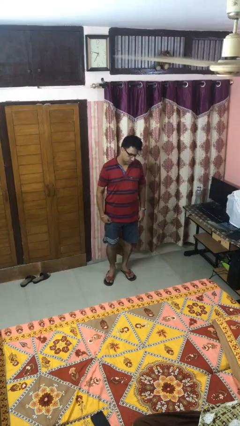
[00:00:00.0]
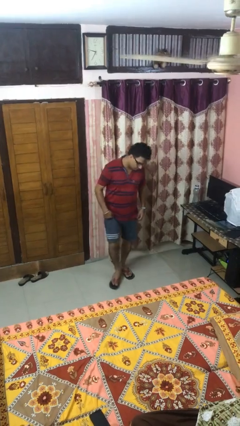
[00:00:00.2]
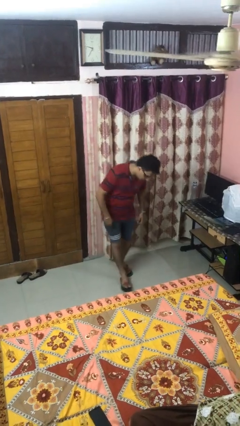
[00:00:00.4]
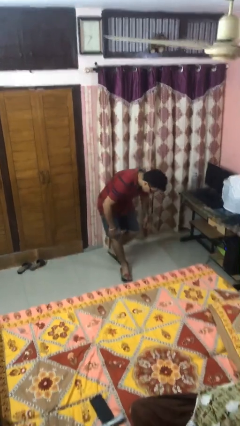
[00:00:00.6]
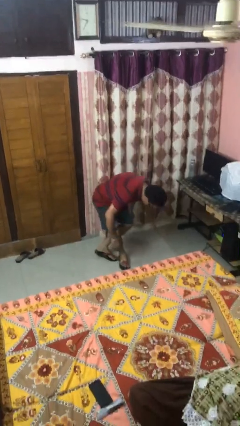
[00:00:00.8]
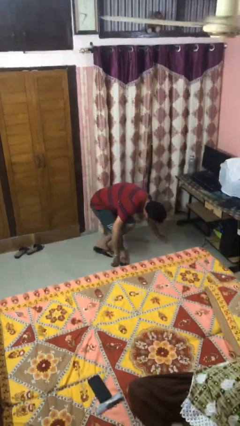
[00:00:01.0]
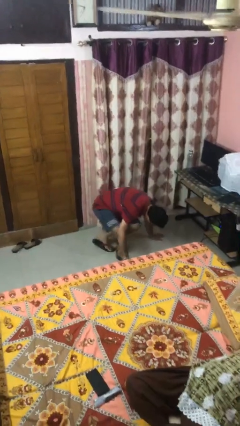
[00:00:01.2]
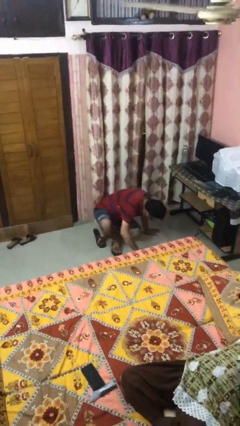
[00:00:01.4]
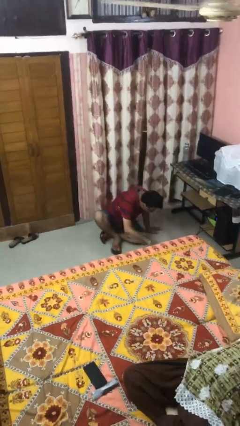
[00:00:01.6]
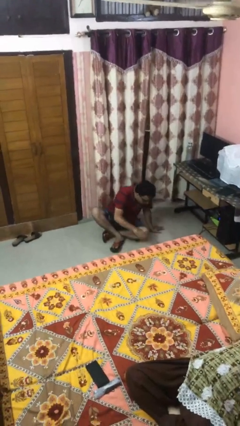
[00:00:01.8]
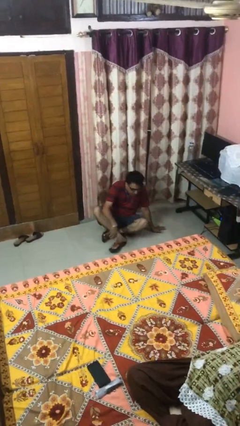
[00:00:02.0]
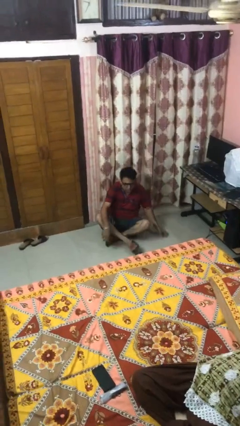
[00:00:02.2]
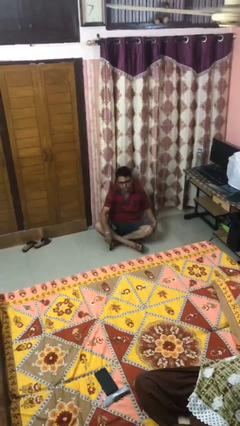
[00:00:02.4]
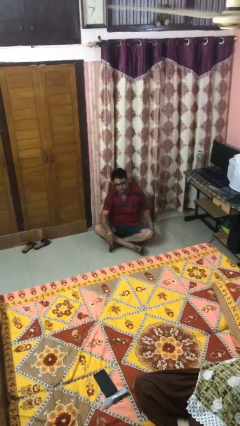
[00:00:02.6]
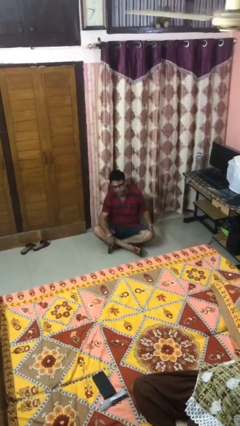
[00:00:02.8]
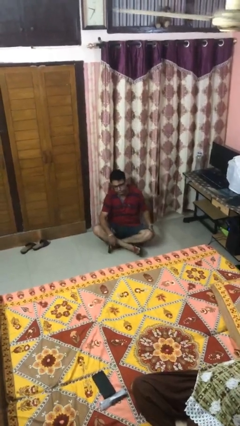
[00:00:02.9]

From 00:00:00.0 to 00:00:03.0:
person sits crisscross

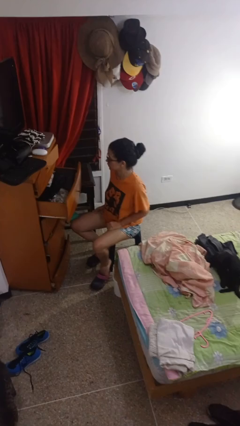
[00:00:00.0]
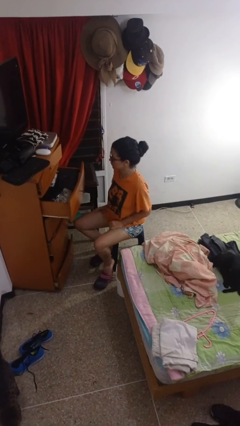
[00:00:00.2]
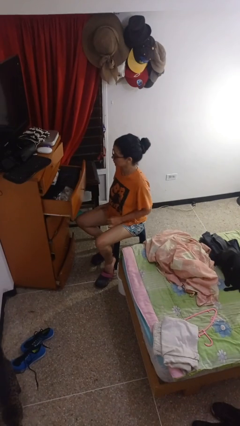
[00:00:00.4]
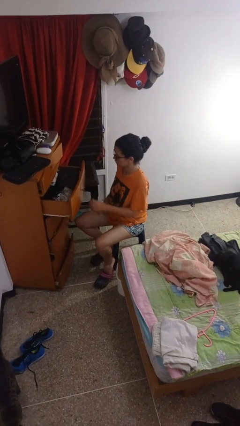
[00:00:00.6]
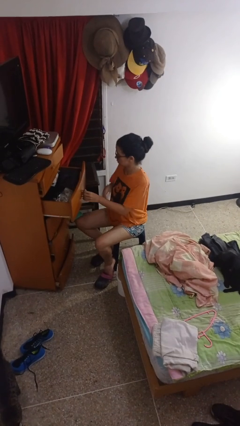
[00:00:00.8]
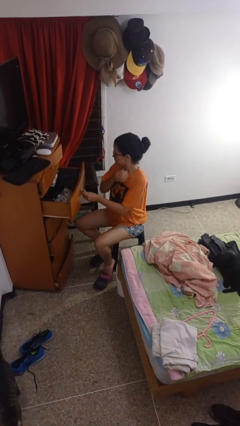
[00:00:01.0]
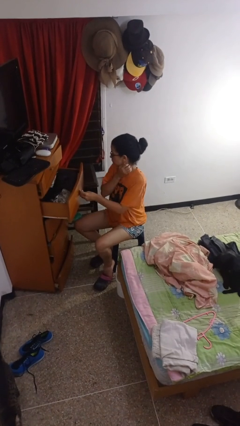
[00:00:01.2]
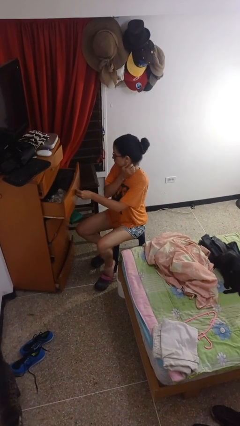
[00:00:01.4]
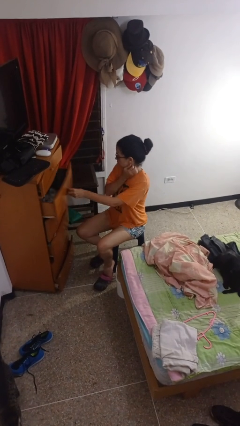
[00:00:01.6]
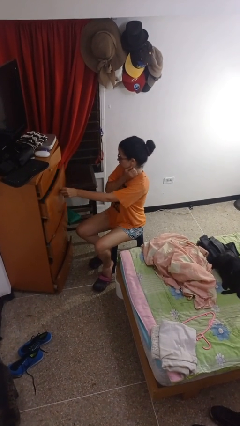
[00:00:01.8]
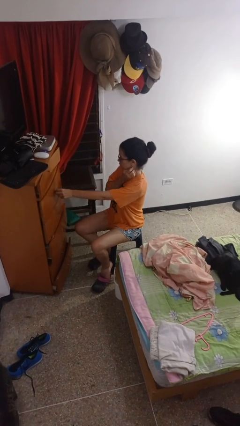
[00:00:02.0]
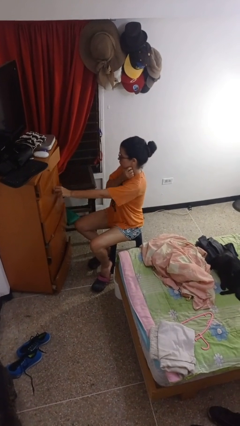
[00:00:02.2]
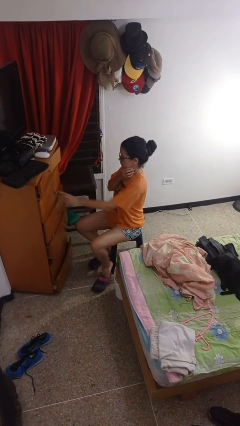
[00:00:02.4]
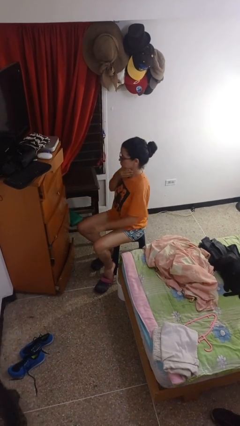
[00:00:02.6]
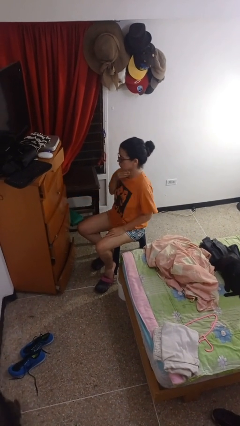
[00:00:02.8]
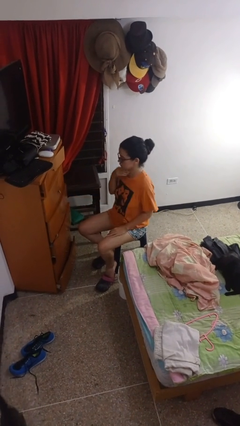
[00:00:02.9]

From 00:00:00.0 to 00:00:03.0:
person closes dresser drawer

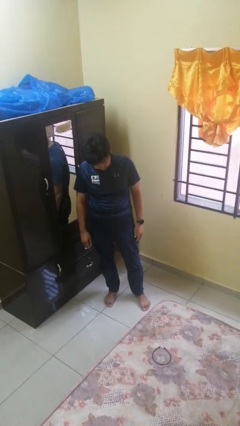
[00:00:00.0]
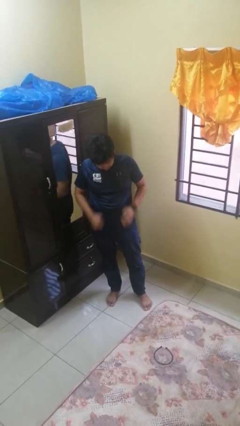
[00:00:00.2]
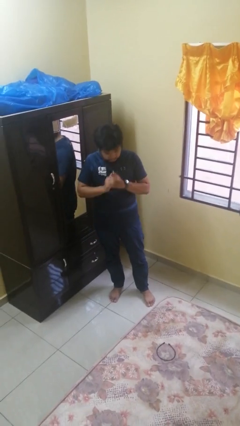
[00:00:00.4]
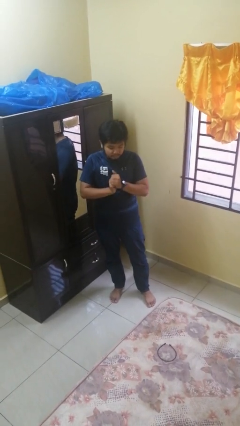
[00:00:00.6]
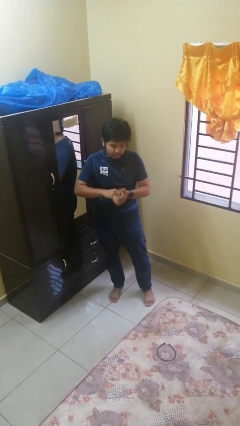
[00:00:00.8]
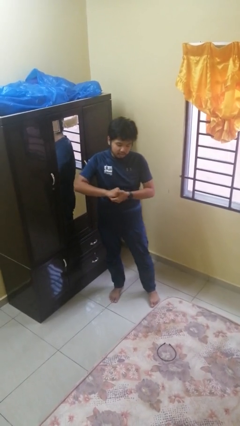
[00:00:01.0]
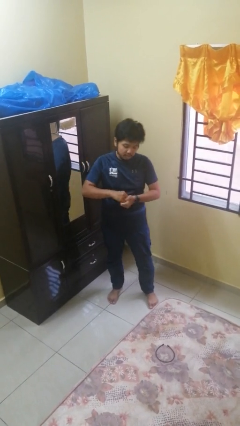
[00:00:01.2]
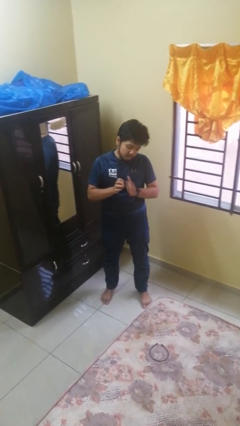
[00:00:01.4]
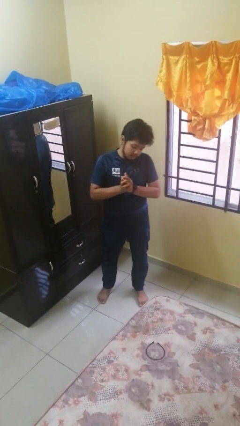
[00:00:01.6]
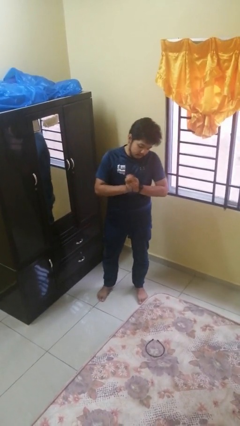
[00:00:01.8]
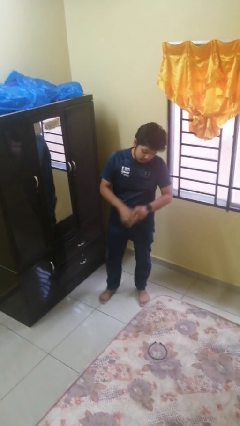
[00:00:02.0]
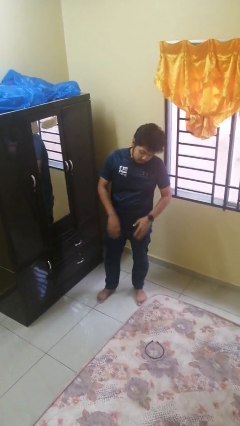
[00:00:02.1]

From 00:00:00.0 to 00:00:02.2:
person cracks knuckles

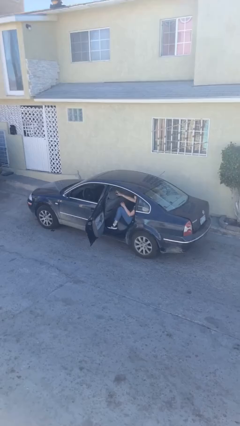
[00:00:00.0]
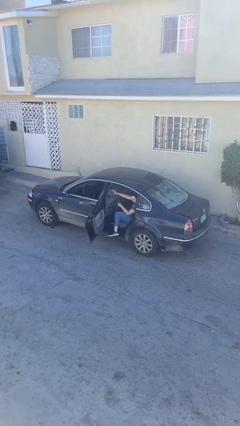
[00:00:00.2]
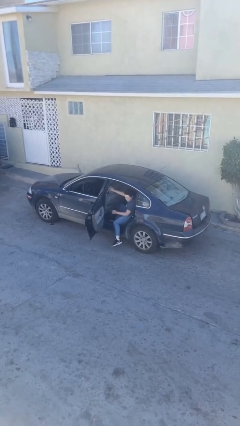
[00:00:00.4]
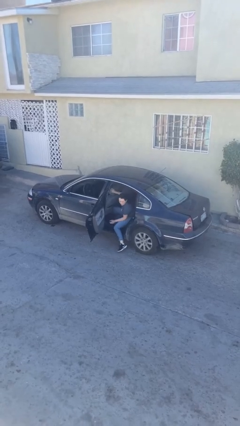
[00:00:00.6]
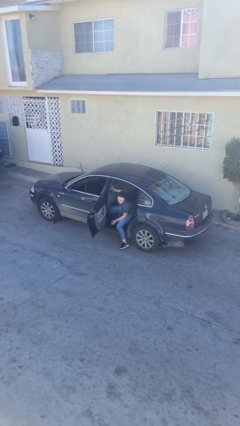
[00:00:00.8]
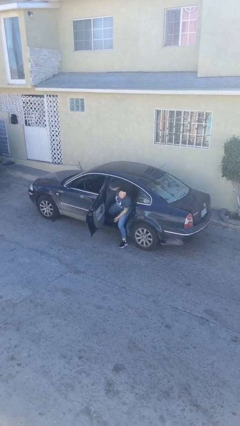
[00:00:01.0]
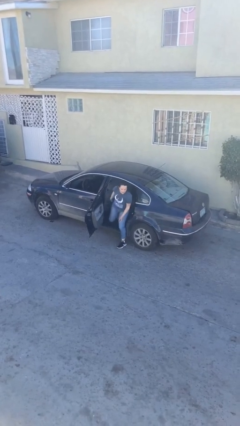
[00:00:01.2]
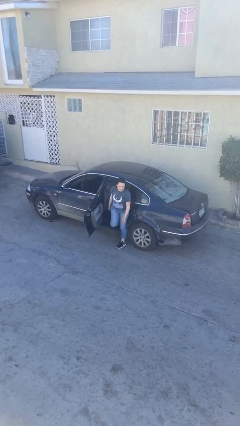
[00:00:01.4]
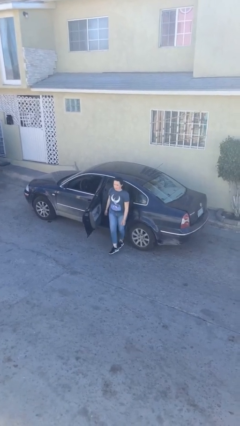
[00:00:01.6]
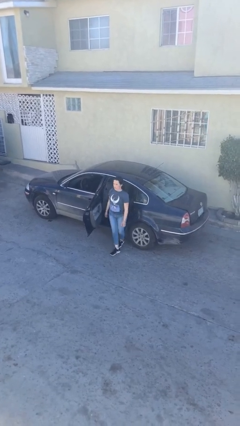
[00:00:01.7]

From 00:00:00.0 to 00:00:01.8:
person exits car

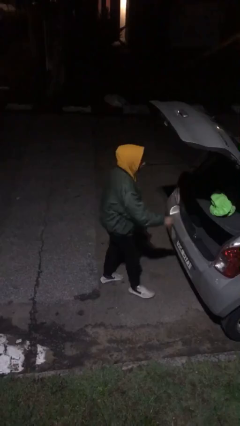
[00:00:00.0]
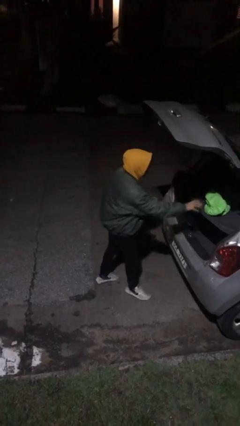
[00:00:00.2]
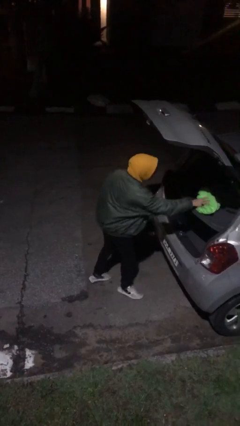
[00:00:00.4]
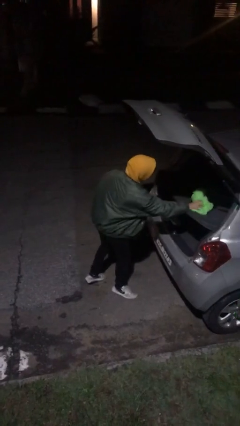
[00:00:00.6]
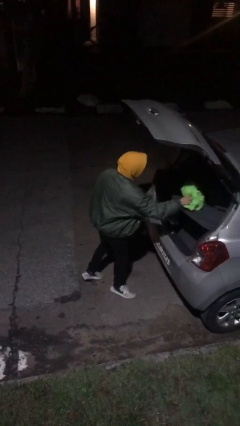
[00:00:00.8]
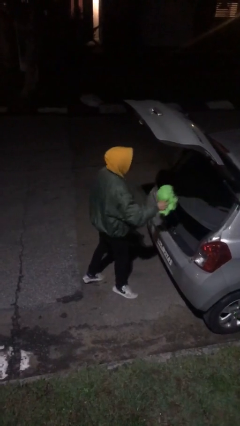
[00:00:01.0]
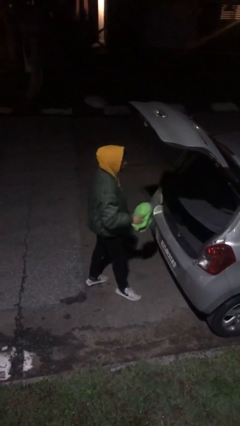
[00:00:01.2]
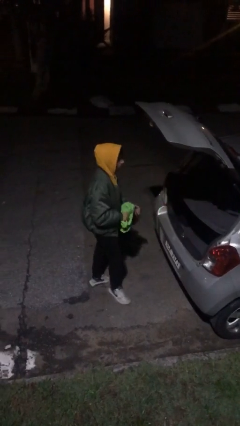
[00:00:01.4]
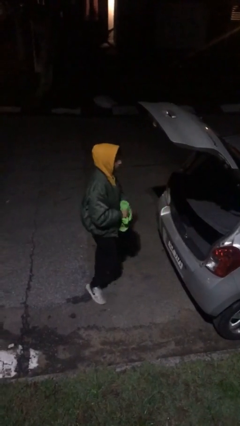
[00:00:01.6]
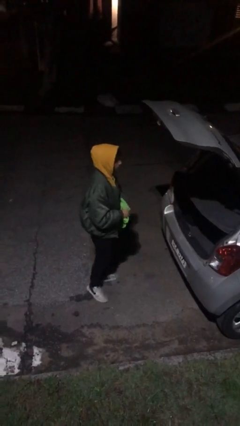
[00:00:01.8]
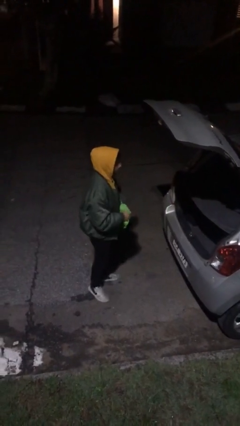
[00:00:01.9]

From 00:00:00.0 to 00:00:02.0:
person unloads car

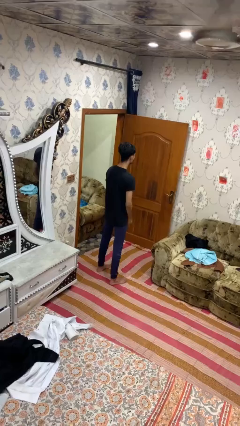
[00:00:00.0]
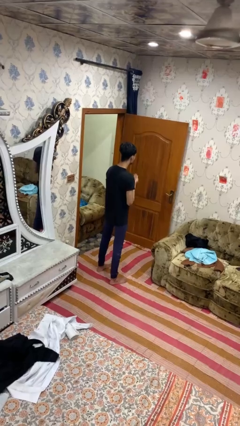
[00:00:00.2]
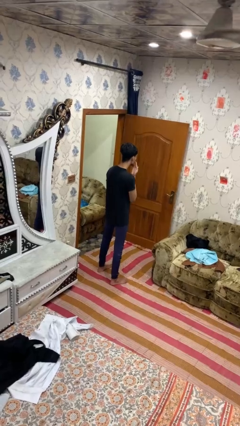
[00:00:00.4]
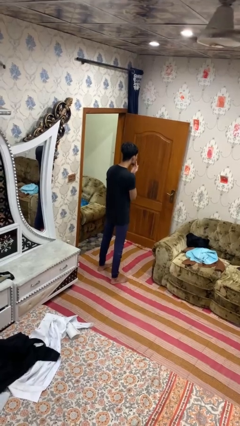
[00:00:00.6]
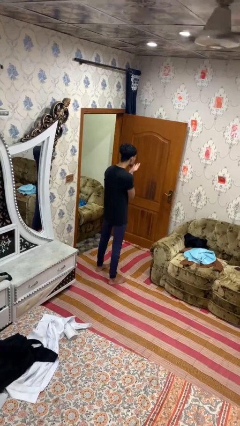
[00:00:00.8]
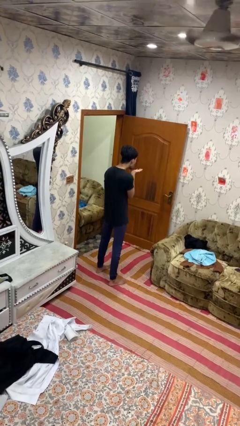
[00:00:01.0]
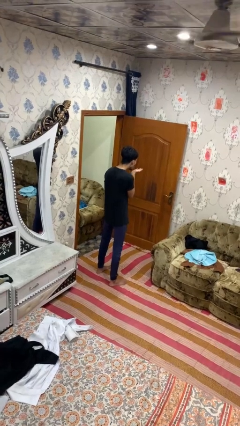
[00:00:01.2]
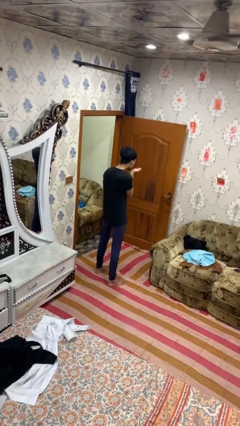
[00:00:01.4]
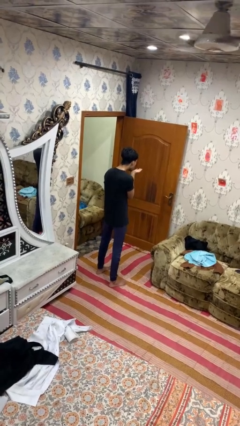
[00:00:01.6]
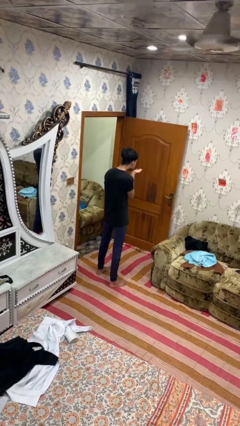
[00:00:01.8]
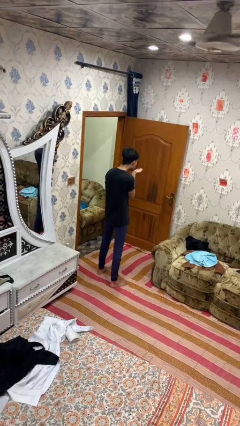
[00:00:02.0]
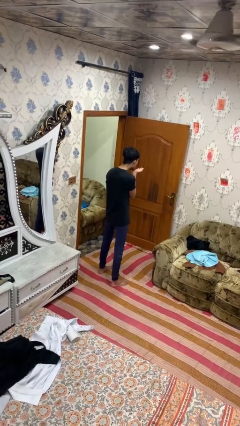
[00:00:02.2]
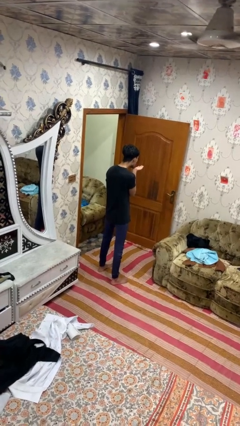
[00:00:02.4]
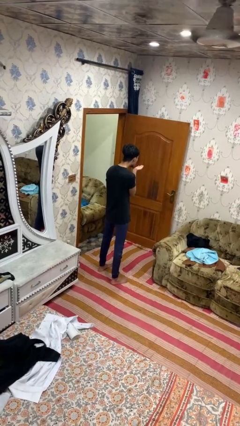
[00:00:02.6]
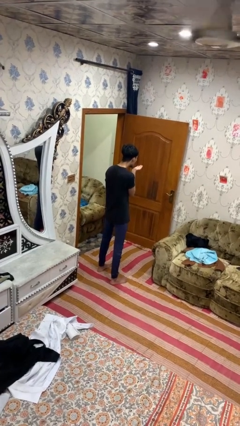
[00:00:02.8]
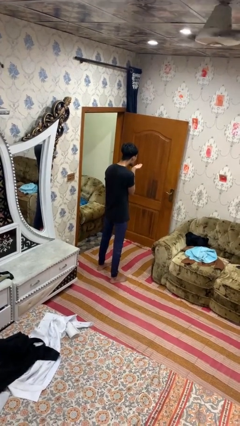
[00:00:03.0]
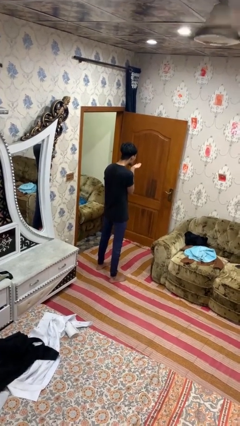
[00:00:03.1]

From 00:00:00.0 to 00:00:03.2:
person gestures blow kiss

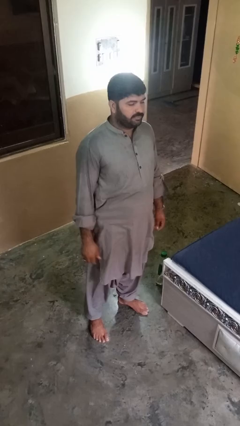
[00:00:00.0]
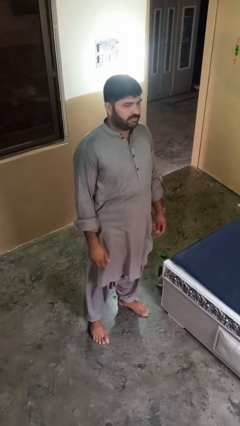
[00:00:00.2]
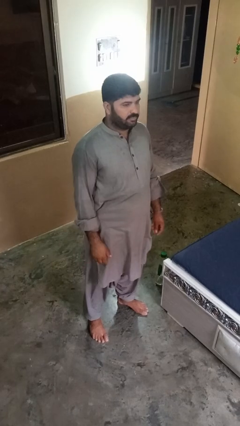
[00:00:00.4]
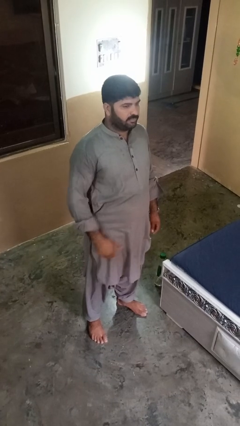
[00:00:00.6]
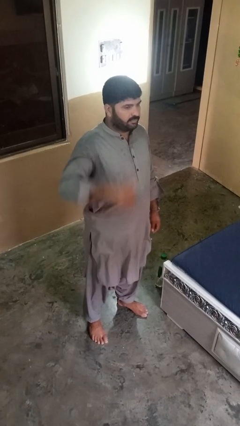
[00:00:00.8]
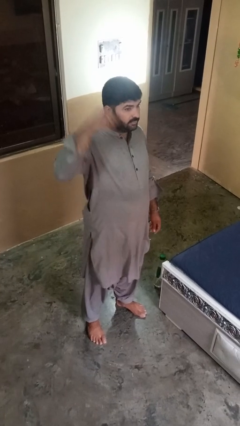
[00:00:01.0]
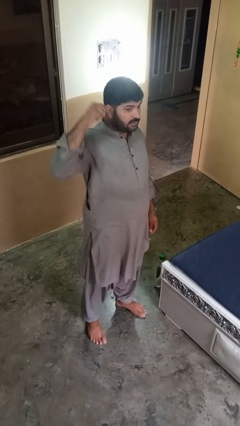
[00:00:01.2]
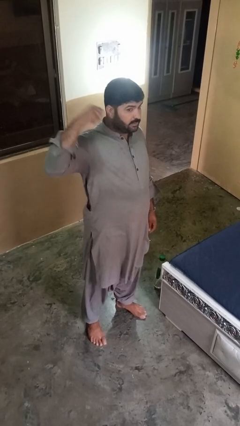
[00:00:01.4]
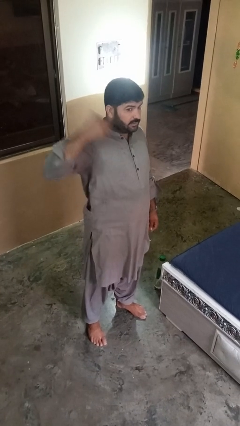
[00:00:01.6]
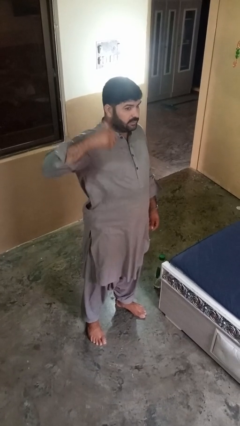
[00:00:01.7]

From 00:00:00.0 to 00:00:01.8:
person gestures behind me
